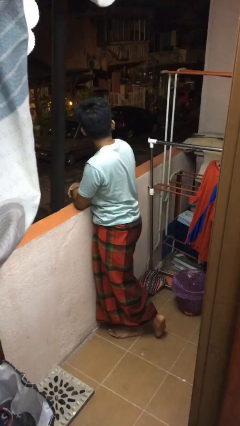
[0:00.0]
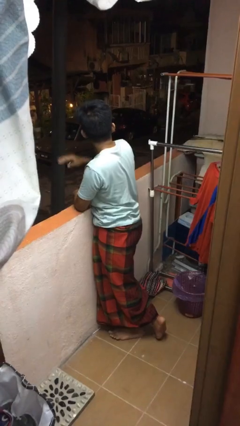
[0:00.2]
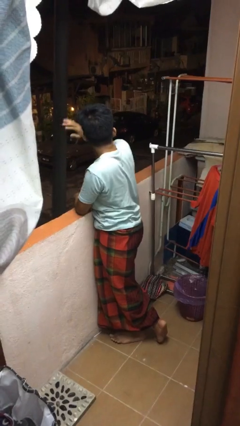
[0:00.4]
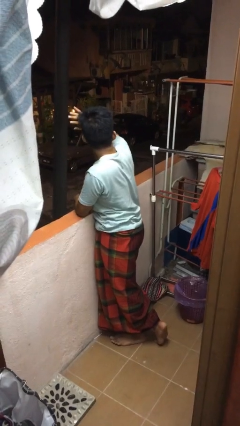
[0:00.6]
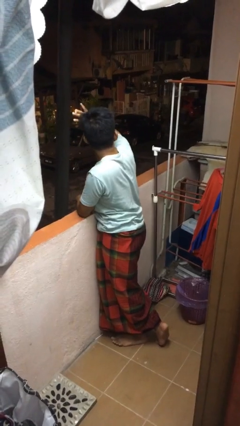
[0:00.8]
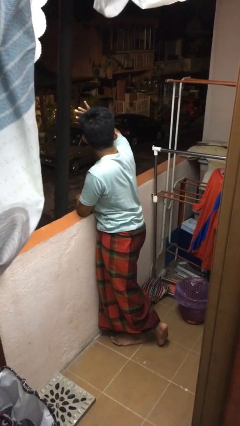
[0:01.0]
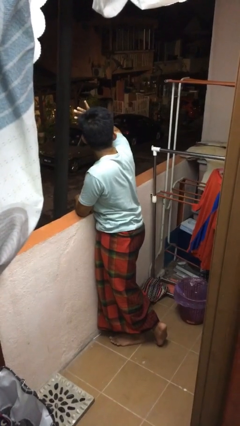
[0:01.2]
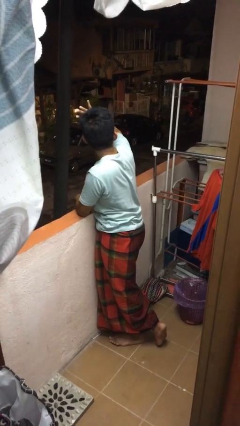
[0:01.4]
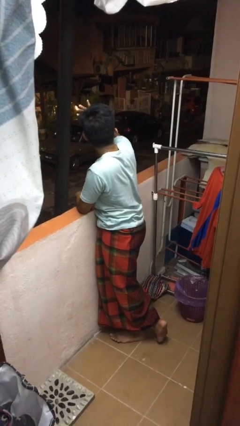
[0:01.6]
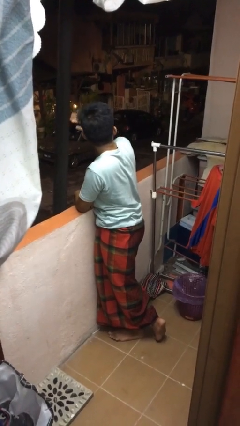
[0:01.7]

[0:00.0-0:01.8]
person shades eyes

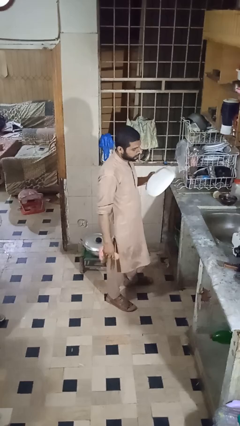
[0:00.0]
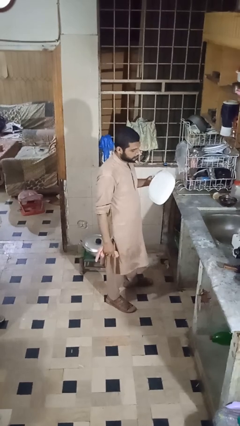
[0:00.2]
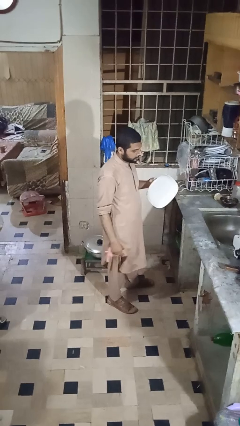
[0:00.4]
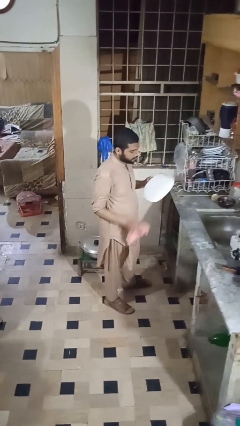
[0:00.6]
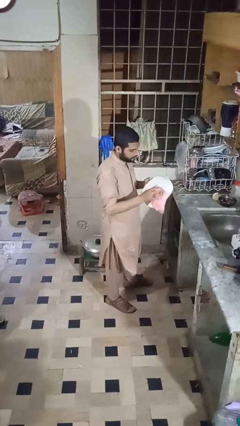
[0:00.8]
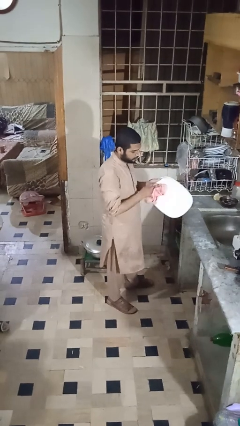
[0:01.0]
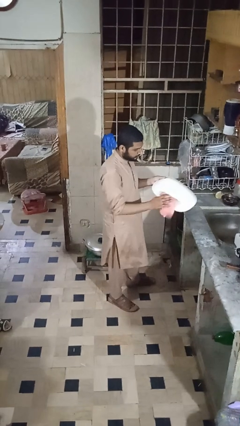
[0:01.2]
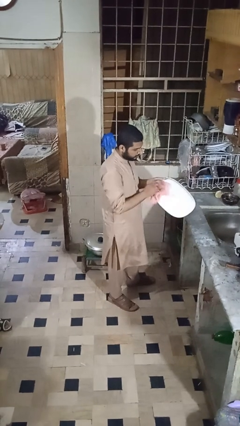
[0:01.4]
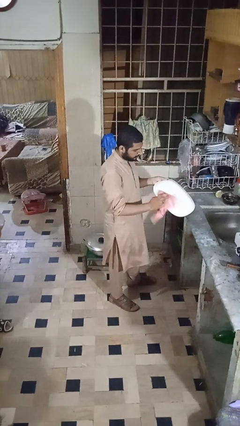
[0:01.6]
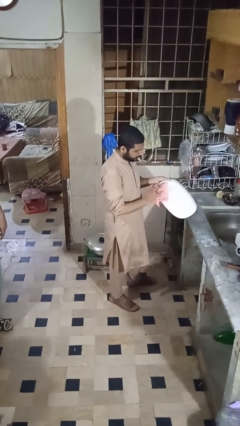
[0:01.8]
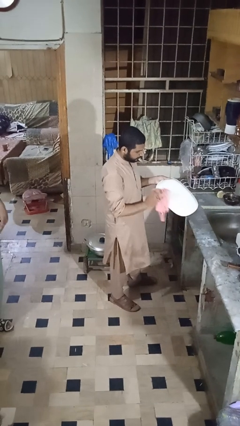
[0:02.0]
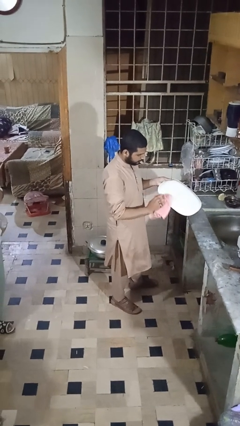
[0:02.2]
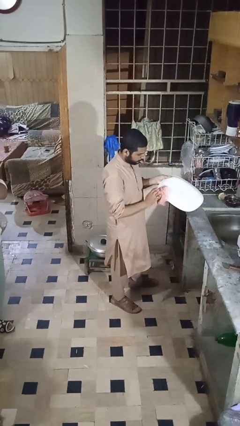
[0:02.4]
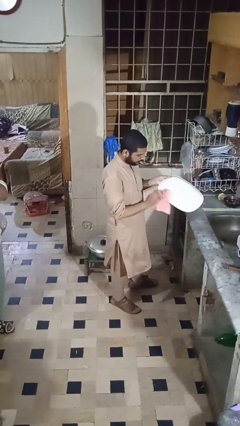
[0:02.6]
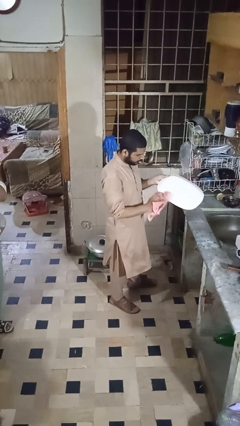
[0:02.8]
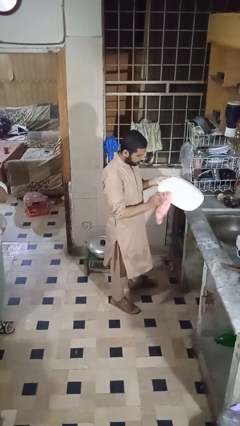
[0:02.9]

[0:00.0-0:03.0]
person dries dish

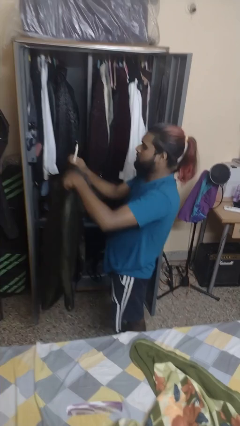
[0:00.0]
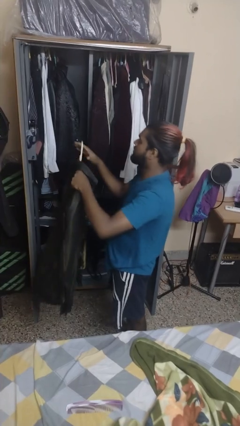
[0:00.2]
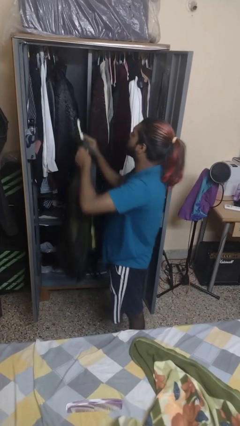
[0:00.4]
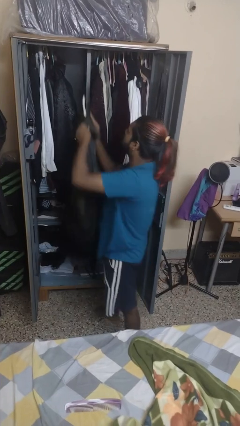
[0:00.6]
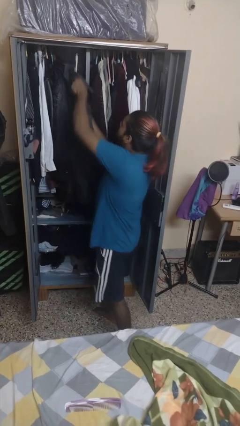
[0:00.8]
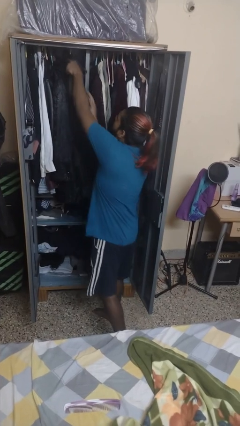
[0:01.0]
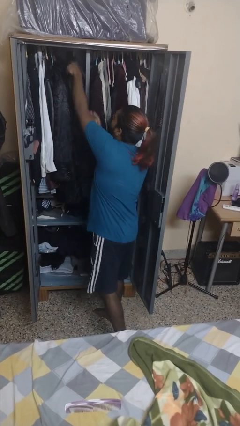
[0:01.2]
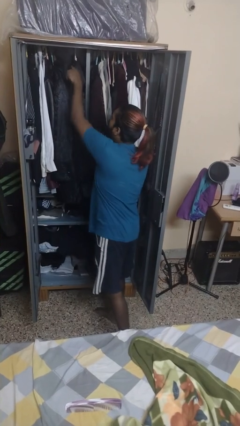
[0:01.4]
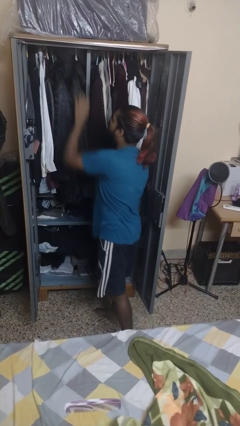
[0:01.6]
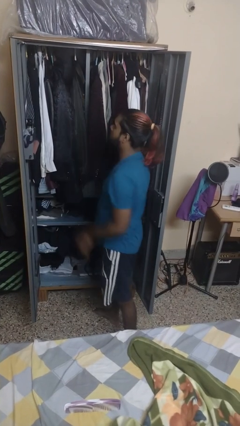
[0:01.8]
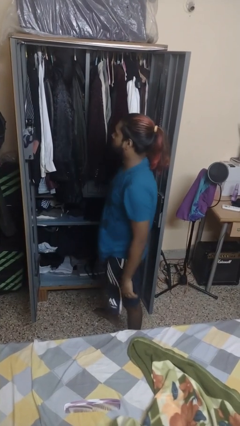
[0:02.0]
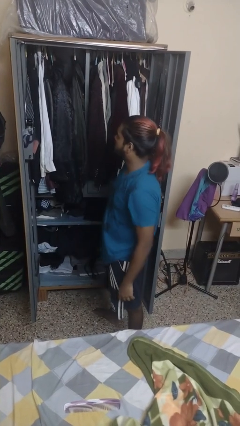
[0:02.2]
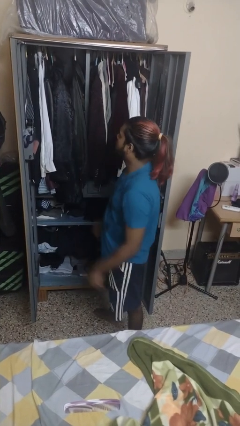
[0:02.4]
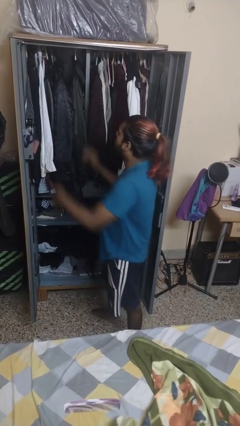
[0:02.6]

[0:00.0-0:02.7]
person puts clothes into dresser

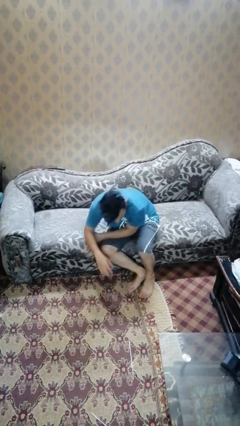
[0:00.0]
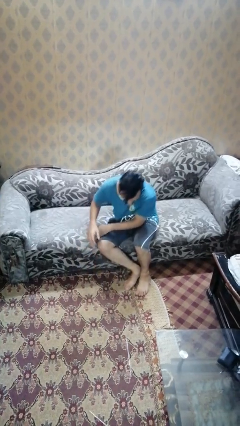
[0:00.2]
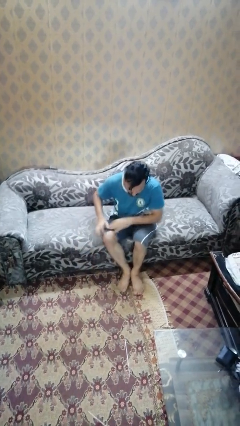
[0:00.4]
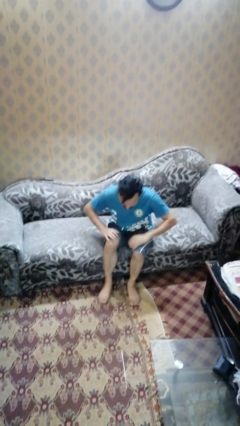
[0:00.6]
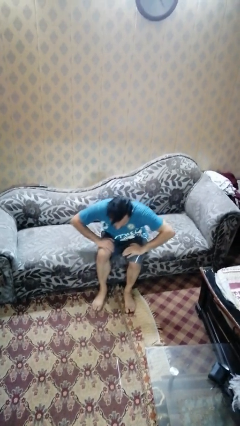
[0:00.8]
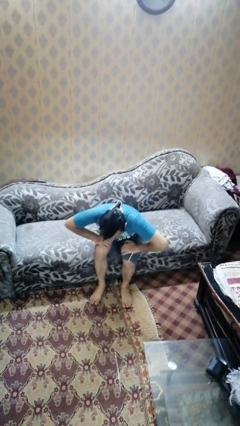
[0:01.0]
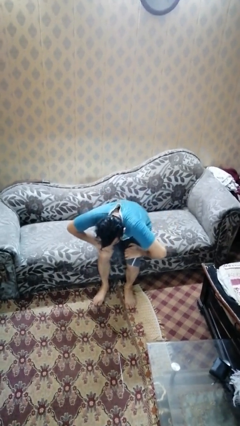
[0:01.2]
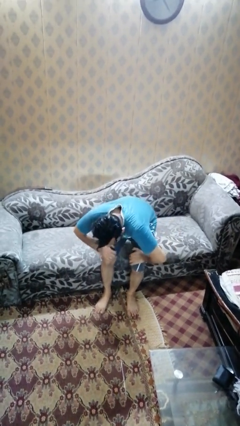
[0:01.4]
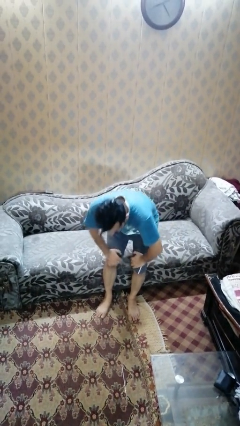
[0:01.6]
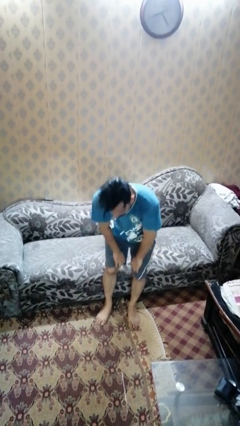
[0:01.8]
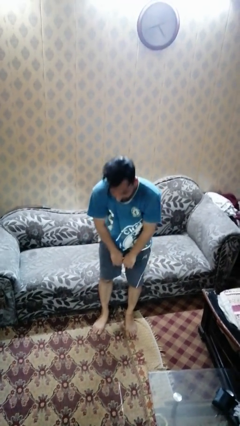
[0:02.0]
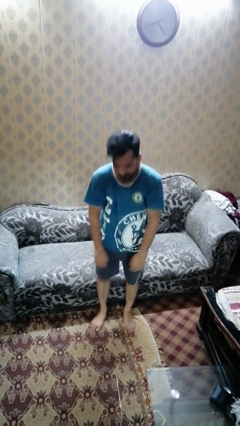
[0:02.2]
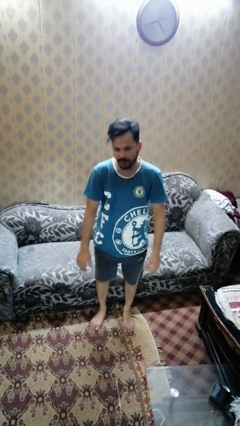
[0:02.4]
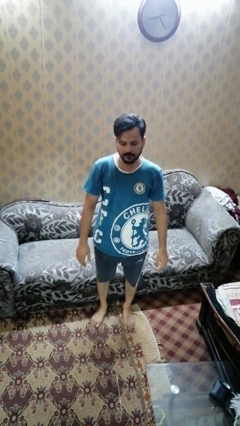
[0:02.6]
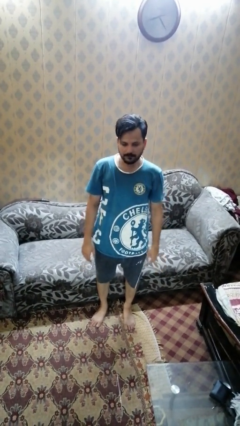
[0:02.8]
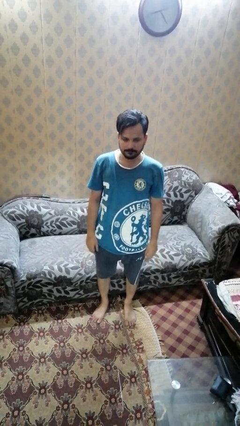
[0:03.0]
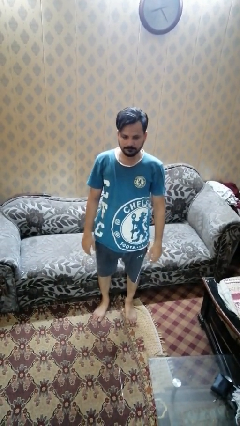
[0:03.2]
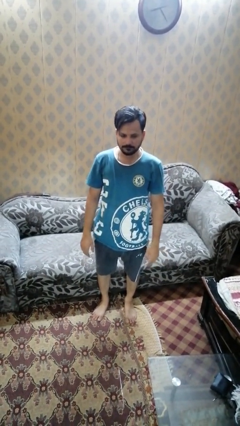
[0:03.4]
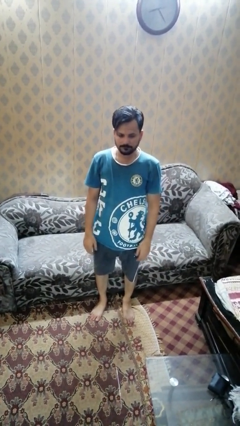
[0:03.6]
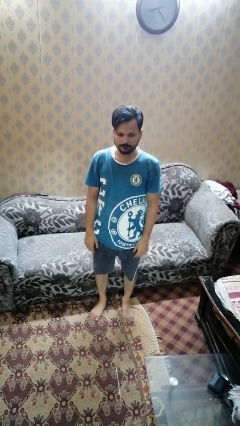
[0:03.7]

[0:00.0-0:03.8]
person stands up

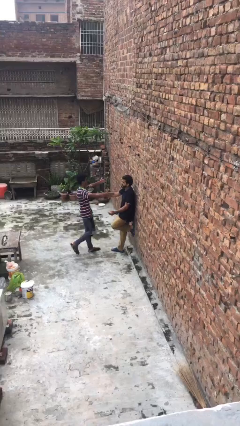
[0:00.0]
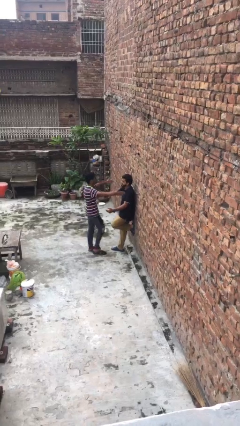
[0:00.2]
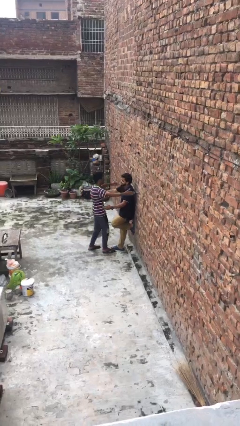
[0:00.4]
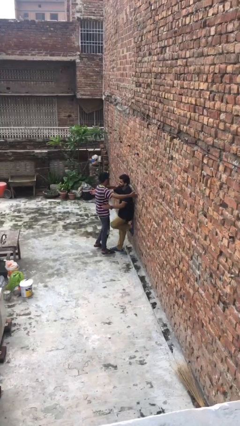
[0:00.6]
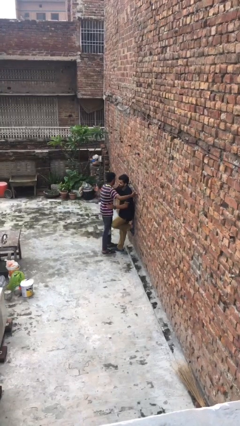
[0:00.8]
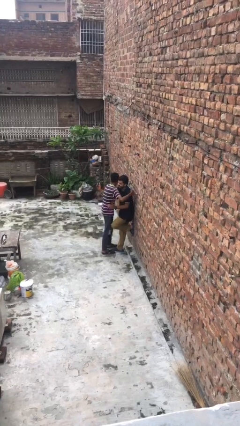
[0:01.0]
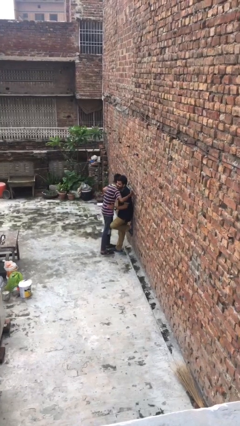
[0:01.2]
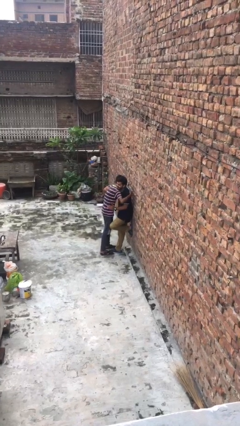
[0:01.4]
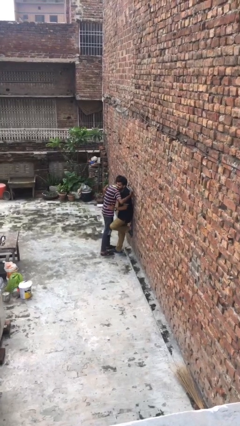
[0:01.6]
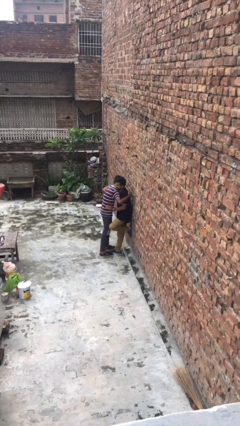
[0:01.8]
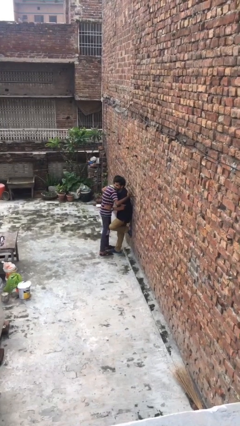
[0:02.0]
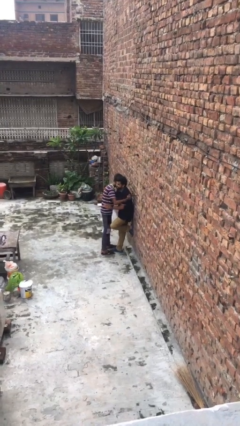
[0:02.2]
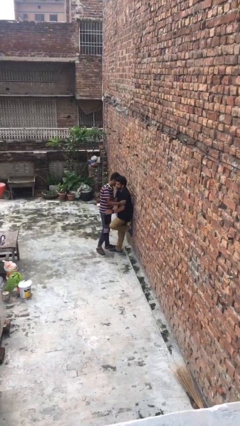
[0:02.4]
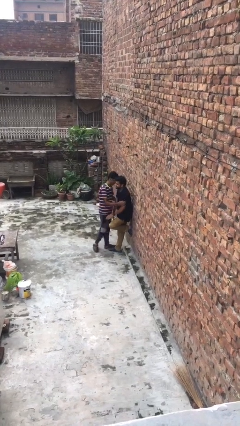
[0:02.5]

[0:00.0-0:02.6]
person embraces person

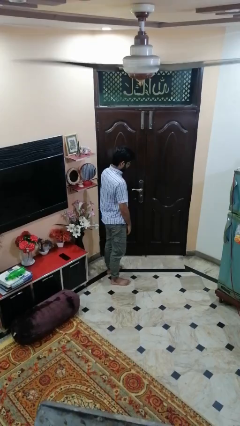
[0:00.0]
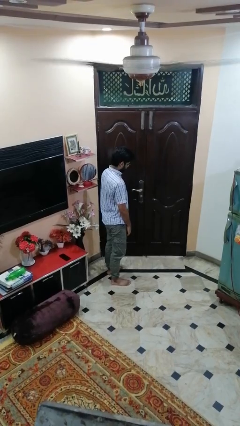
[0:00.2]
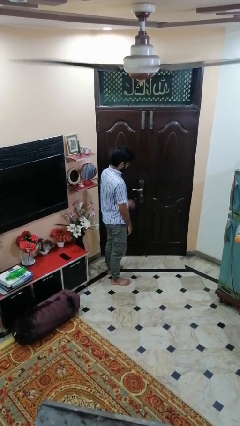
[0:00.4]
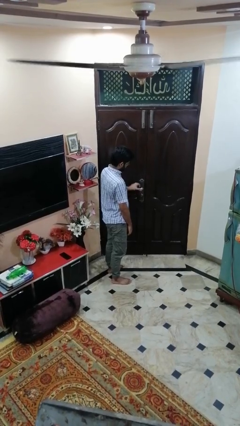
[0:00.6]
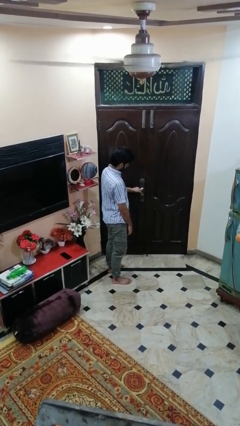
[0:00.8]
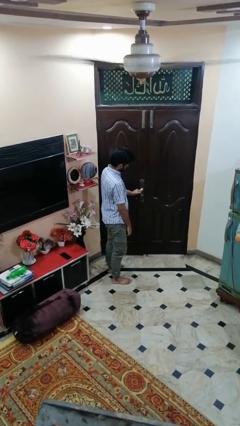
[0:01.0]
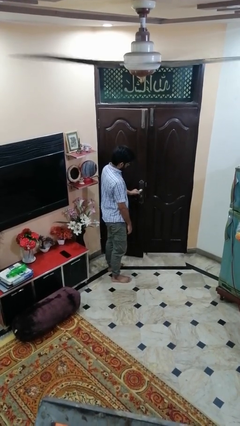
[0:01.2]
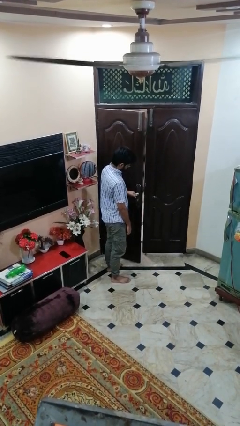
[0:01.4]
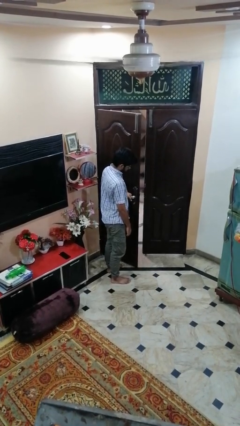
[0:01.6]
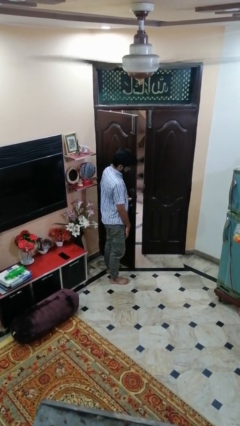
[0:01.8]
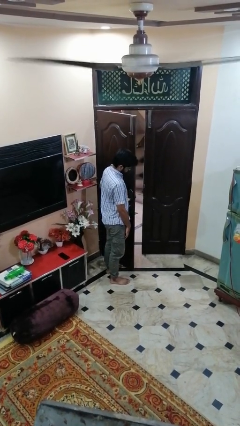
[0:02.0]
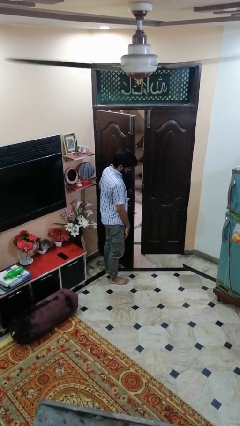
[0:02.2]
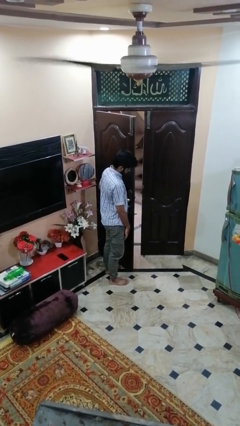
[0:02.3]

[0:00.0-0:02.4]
person opens facility door

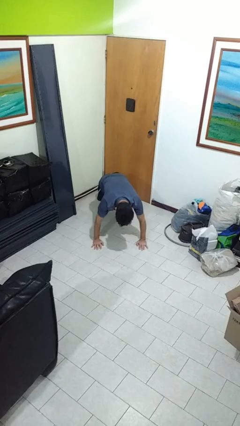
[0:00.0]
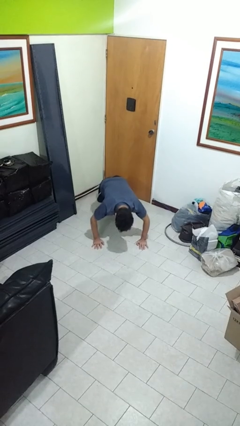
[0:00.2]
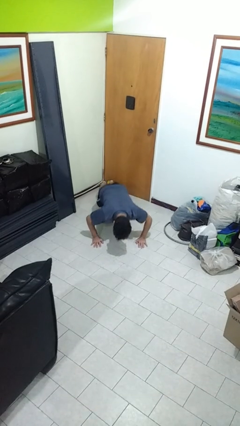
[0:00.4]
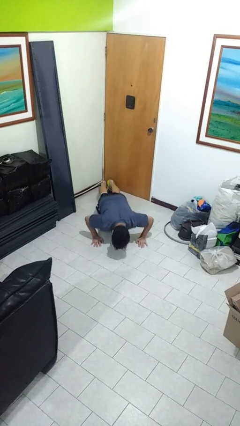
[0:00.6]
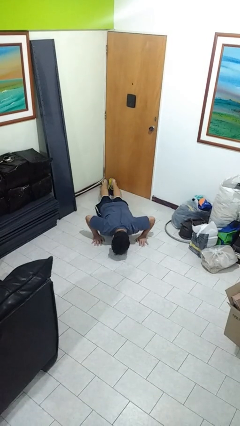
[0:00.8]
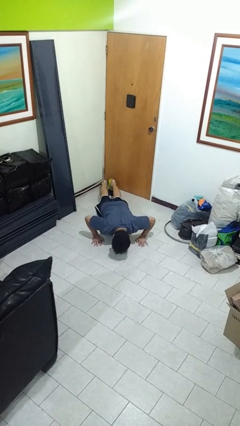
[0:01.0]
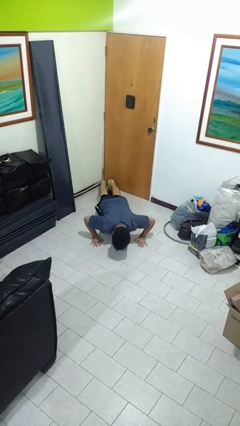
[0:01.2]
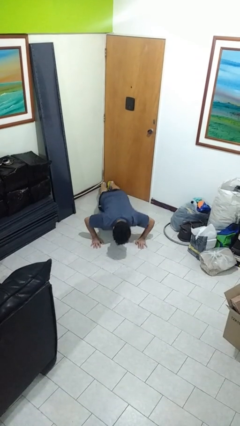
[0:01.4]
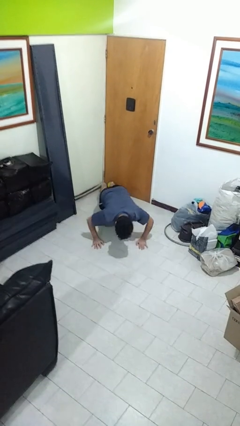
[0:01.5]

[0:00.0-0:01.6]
person exercises with pushup
